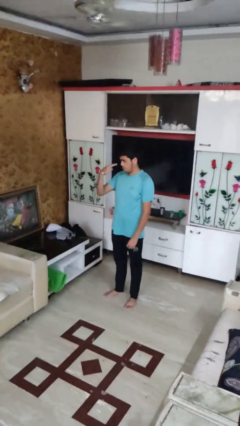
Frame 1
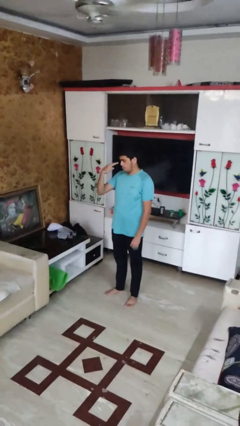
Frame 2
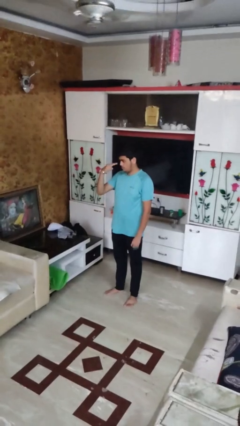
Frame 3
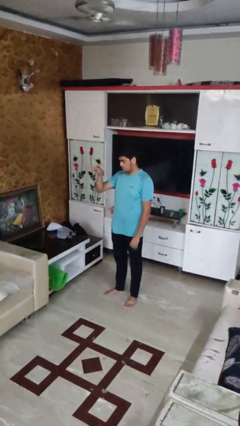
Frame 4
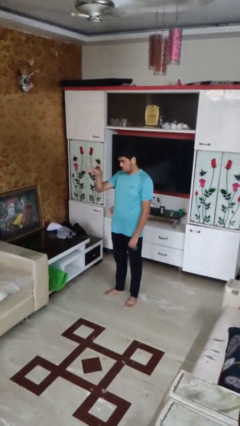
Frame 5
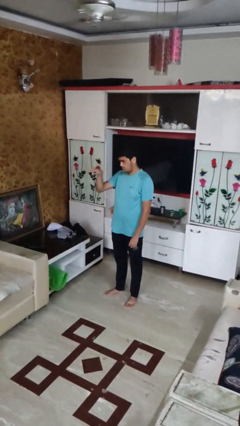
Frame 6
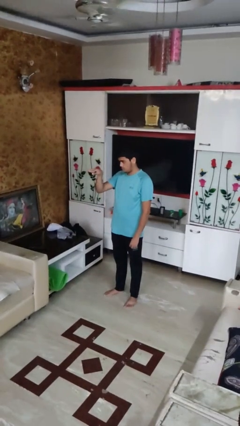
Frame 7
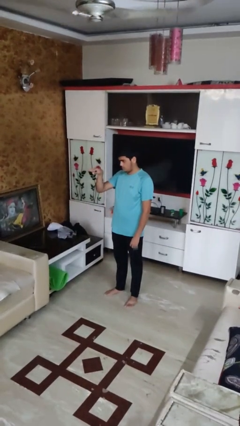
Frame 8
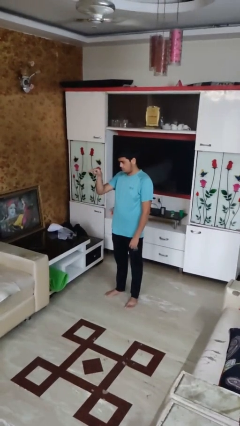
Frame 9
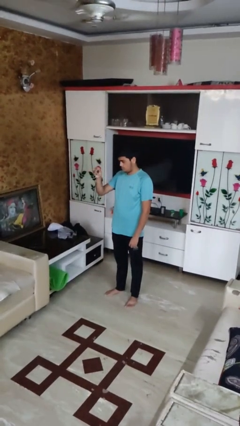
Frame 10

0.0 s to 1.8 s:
person gestures watch closely

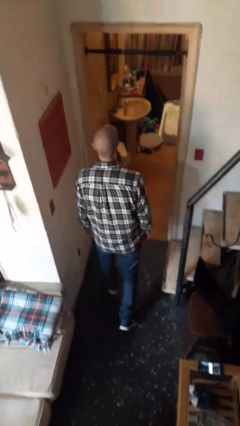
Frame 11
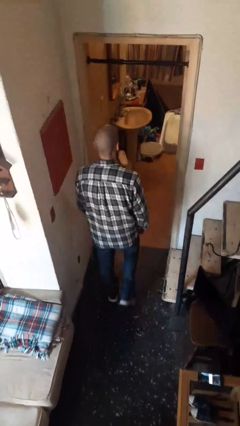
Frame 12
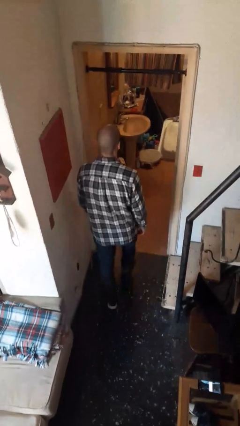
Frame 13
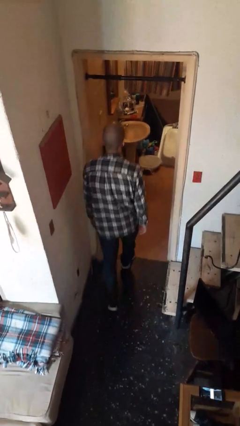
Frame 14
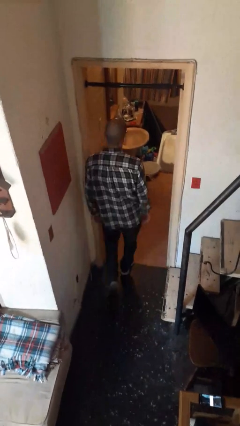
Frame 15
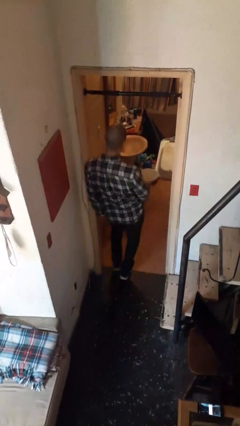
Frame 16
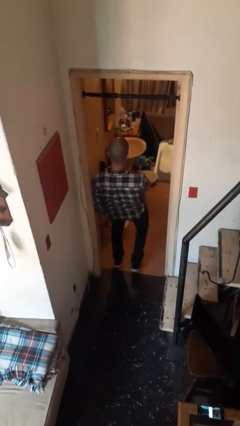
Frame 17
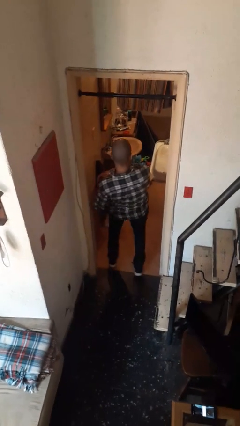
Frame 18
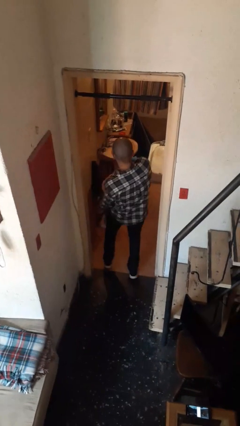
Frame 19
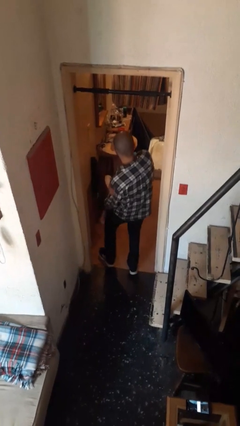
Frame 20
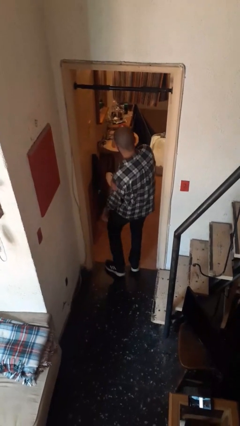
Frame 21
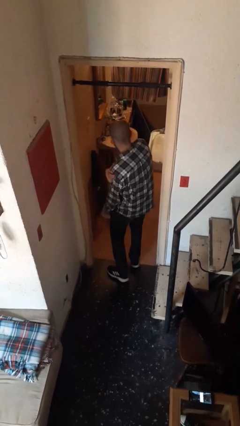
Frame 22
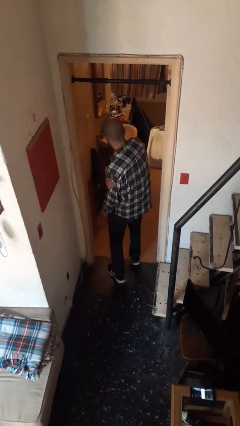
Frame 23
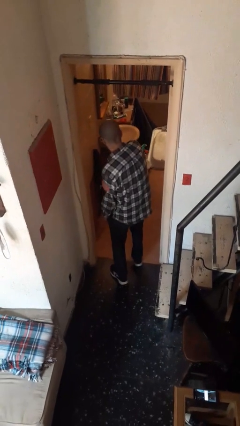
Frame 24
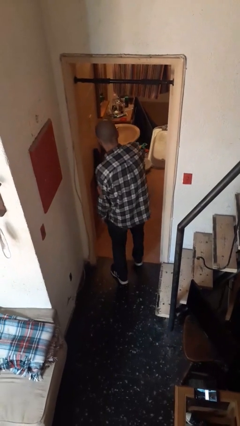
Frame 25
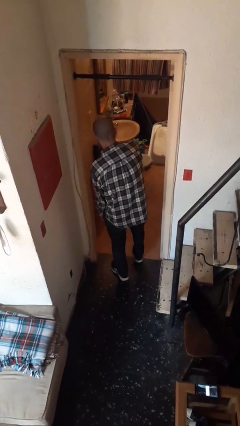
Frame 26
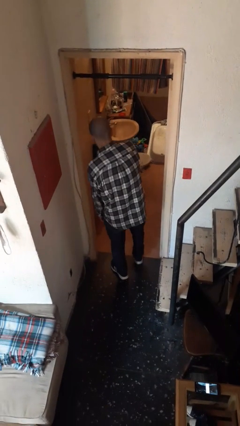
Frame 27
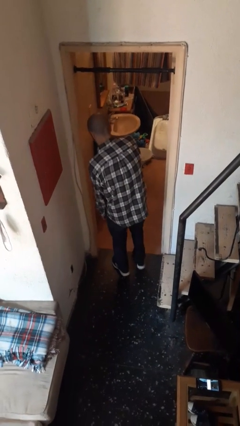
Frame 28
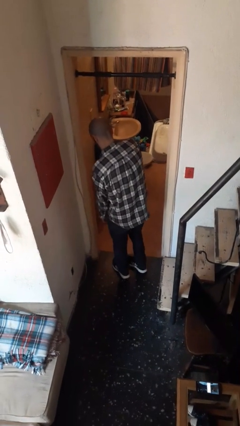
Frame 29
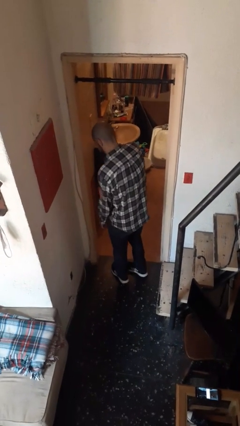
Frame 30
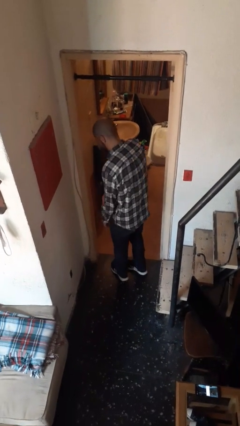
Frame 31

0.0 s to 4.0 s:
person bumps into wall

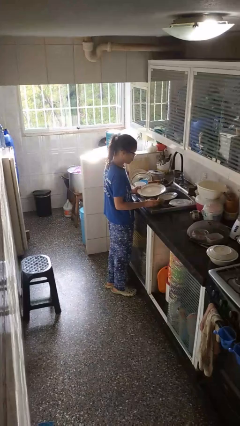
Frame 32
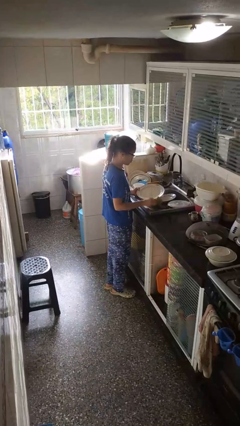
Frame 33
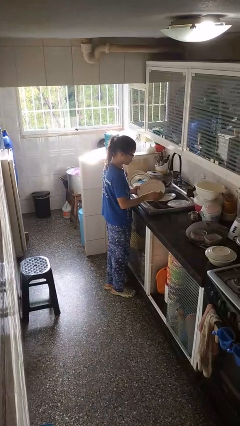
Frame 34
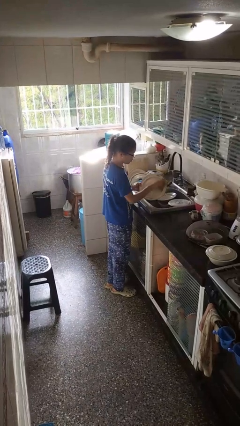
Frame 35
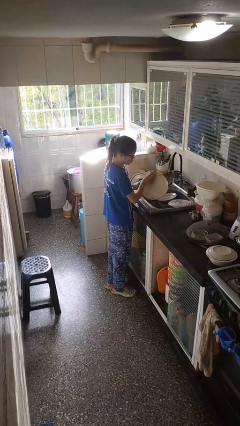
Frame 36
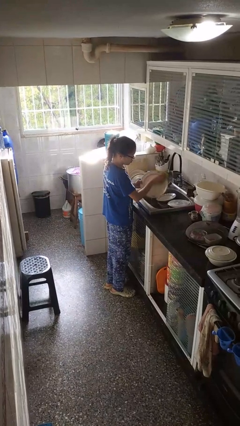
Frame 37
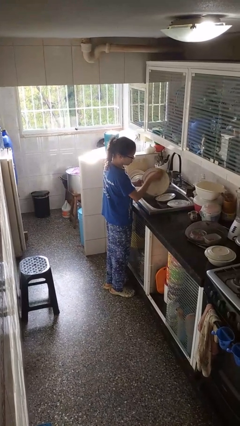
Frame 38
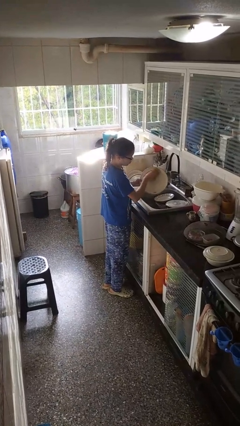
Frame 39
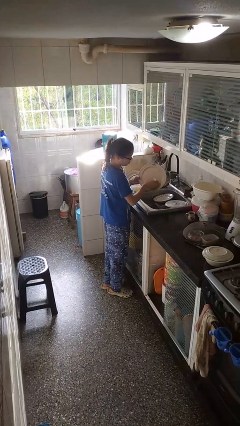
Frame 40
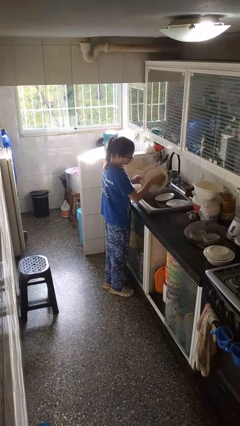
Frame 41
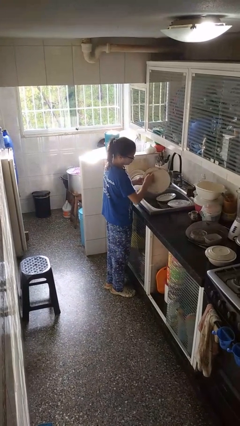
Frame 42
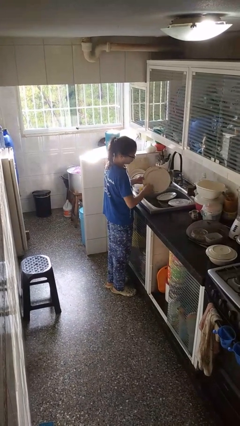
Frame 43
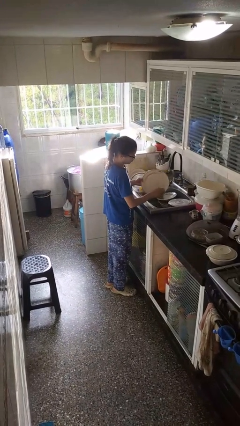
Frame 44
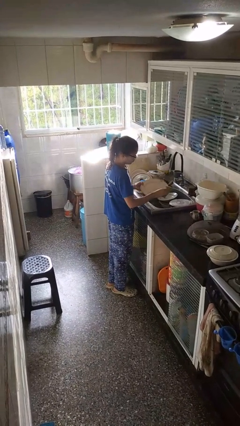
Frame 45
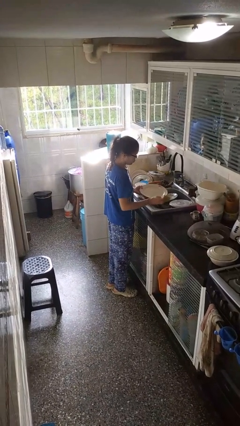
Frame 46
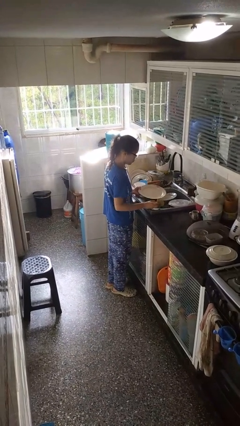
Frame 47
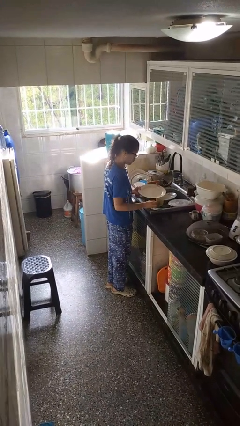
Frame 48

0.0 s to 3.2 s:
person washes dish

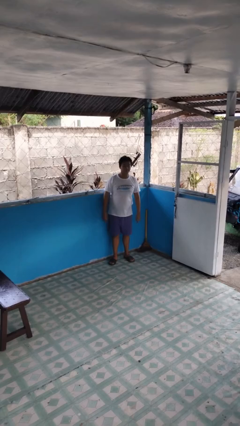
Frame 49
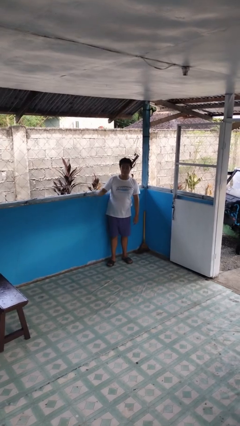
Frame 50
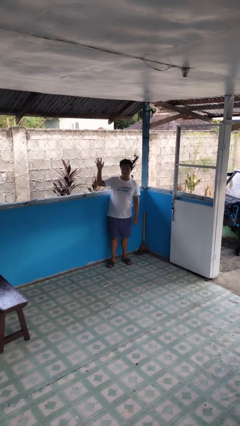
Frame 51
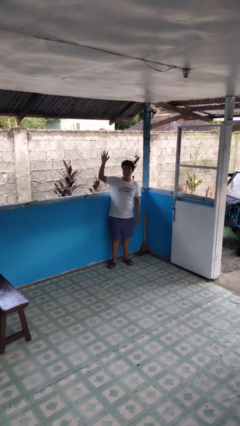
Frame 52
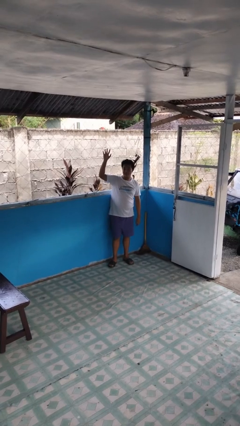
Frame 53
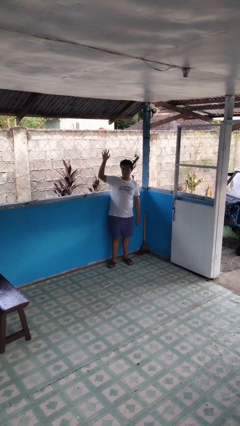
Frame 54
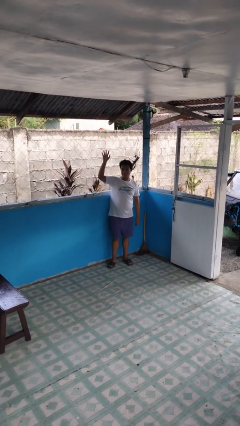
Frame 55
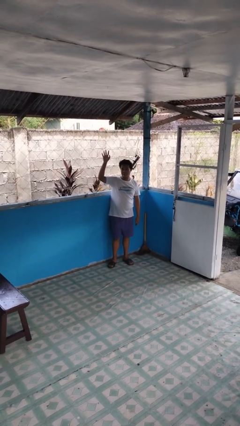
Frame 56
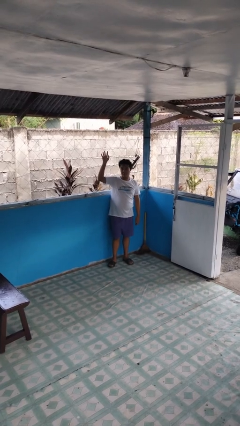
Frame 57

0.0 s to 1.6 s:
person gestures number five

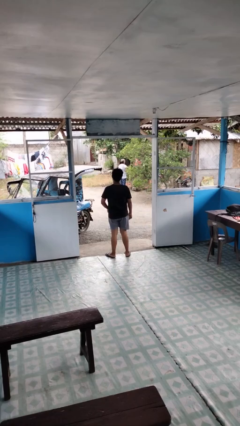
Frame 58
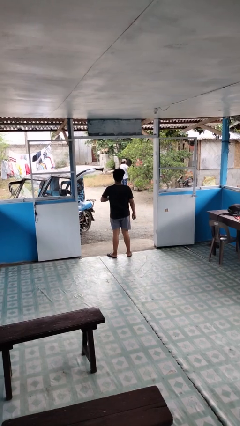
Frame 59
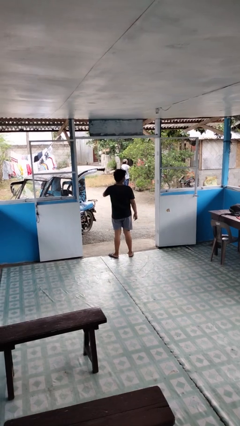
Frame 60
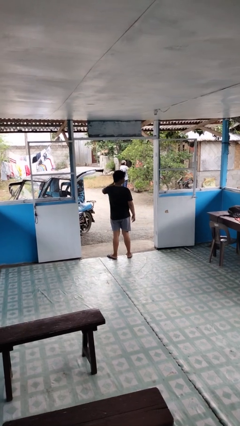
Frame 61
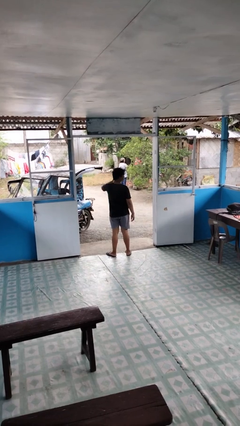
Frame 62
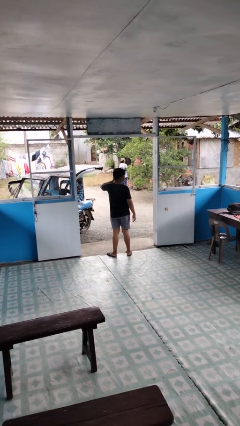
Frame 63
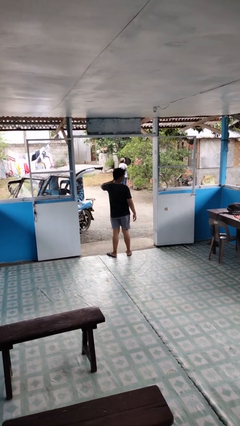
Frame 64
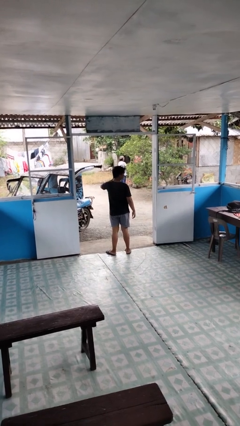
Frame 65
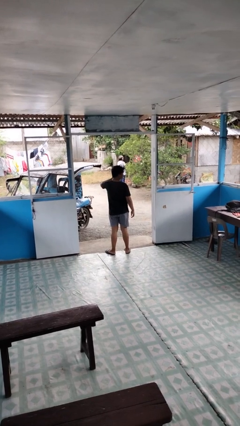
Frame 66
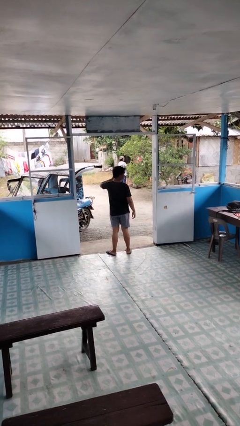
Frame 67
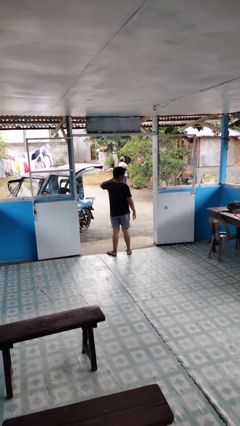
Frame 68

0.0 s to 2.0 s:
person touches earlobe

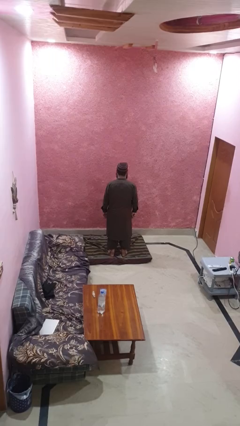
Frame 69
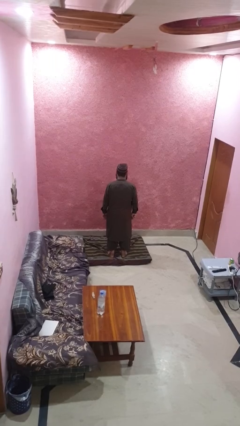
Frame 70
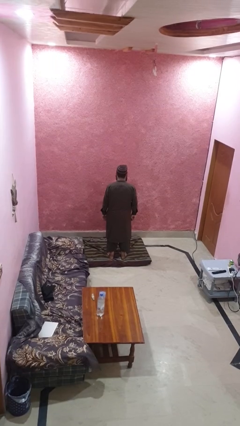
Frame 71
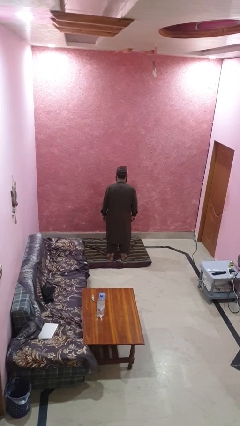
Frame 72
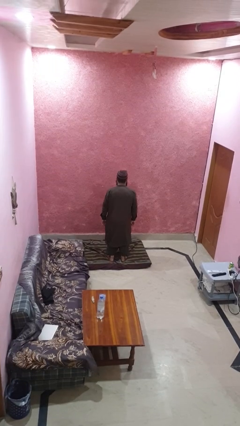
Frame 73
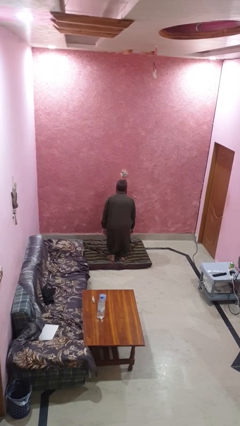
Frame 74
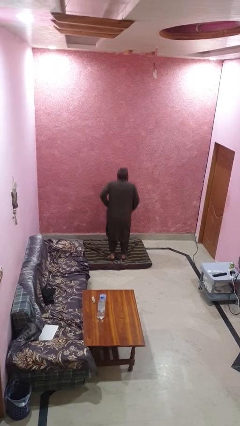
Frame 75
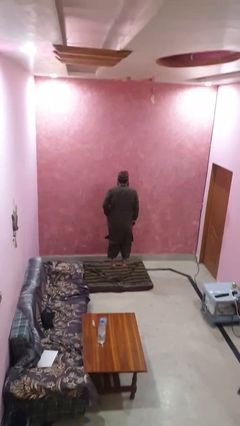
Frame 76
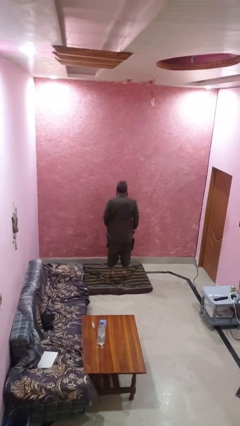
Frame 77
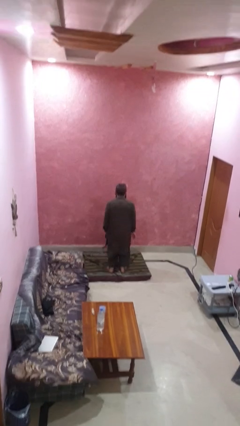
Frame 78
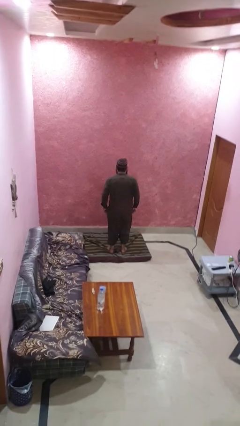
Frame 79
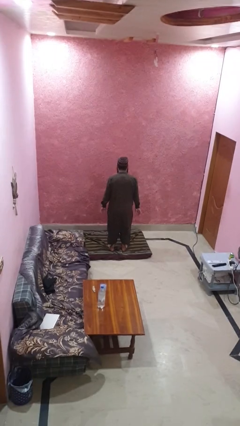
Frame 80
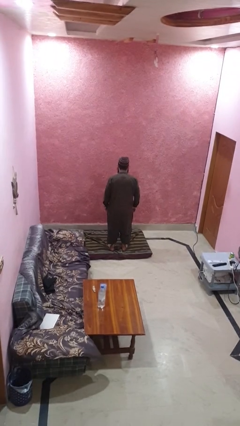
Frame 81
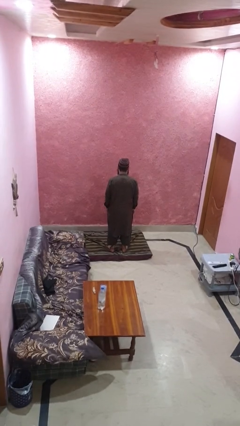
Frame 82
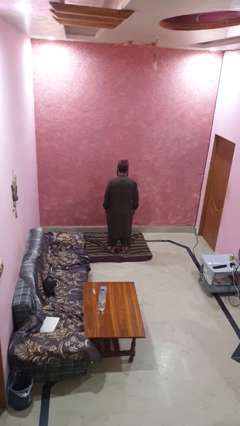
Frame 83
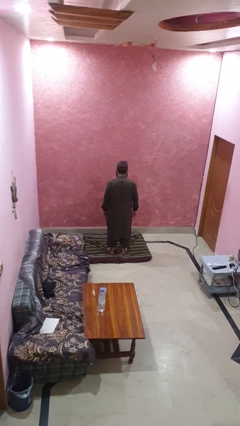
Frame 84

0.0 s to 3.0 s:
person jumps

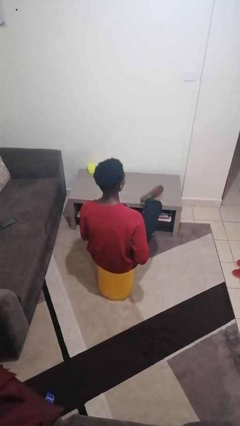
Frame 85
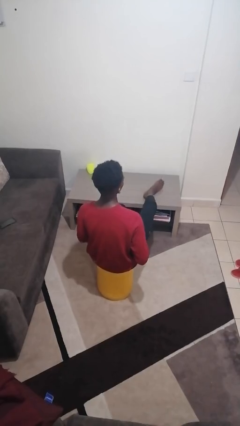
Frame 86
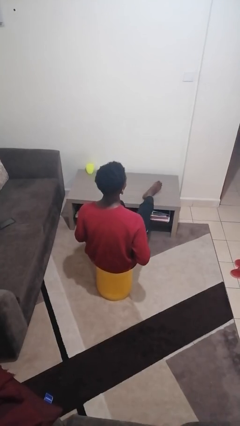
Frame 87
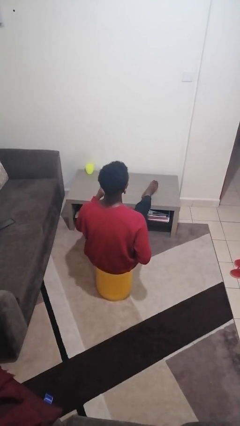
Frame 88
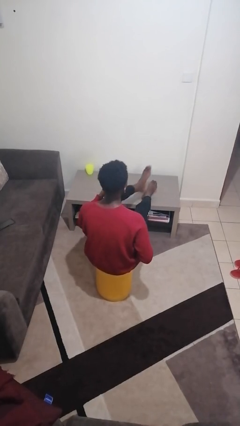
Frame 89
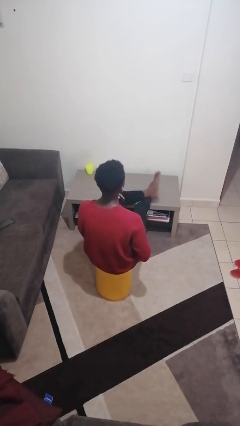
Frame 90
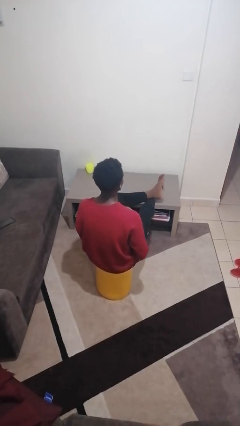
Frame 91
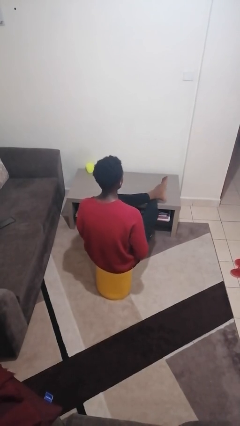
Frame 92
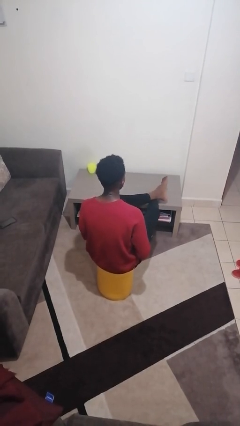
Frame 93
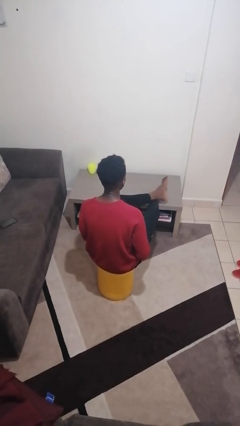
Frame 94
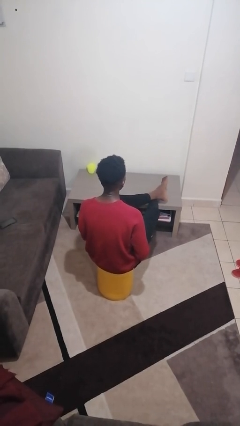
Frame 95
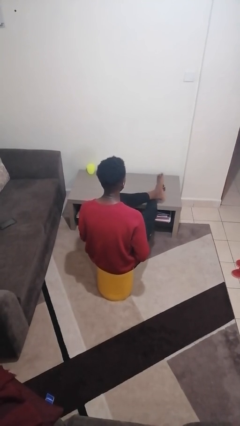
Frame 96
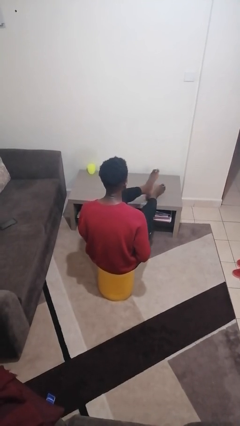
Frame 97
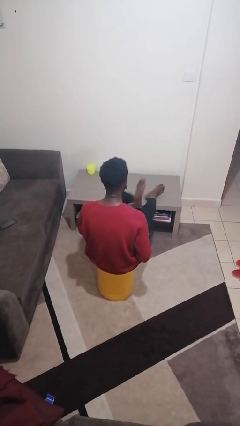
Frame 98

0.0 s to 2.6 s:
person puts feet up
